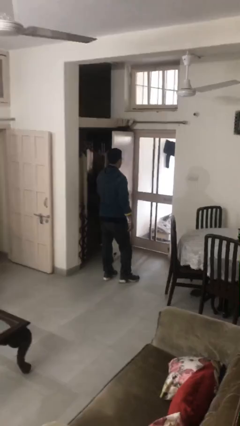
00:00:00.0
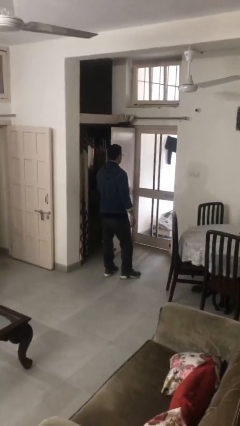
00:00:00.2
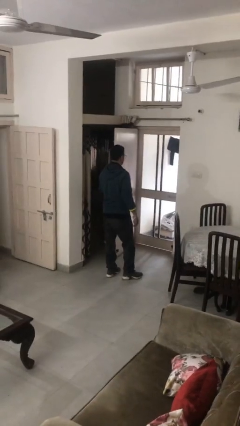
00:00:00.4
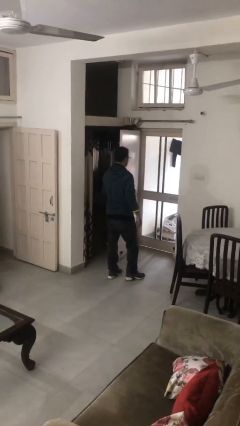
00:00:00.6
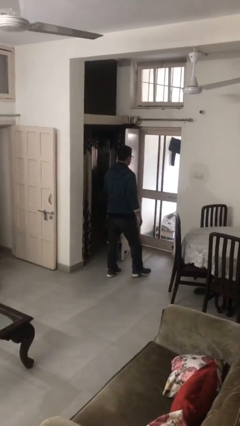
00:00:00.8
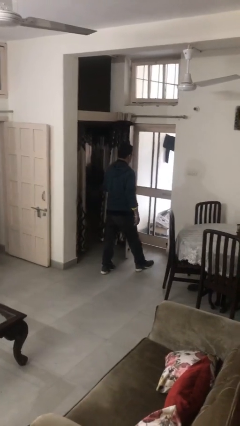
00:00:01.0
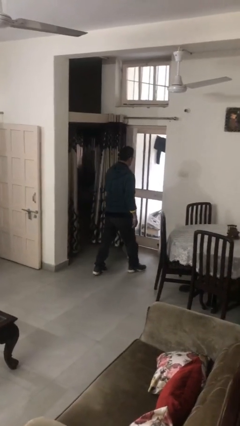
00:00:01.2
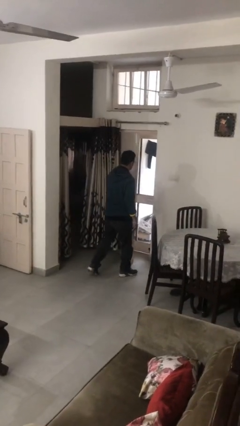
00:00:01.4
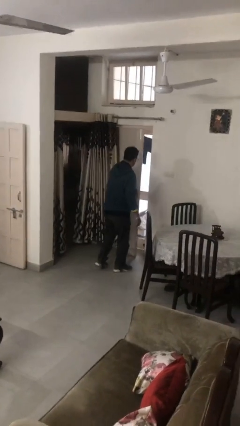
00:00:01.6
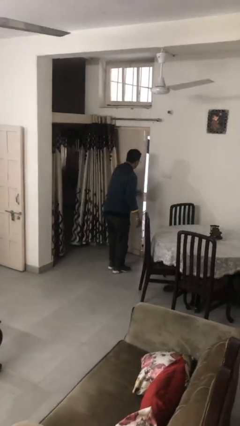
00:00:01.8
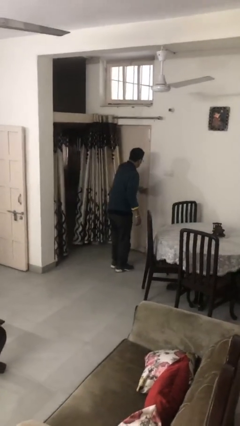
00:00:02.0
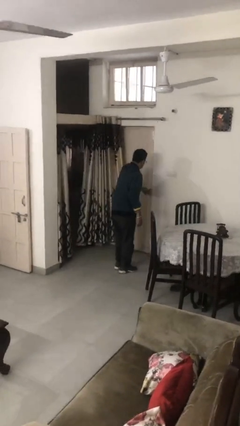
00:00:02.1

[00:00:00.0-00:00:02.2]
person closes facility door

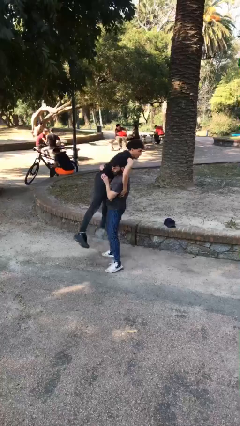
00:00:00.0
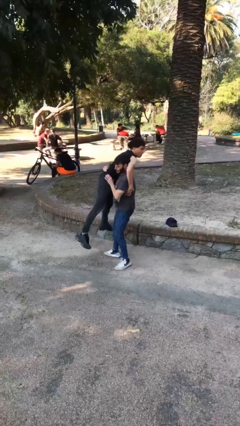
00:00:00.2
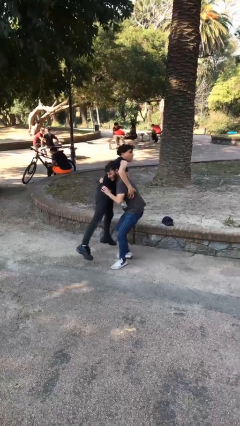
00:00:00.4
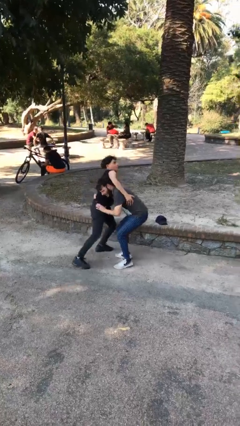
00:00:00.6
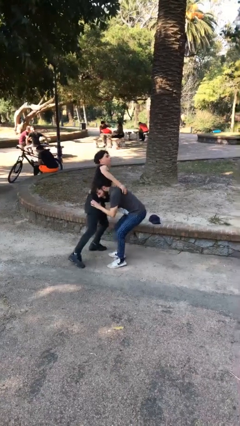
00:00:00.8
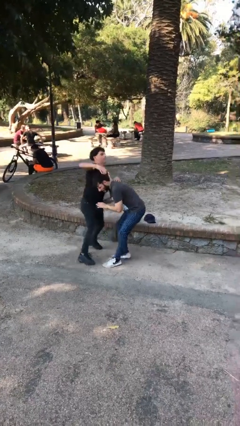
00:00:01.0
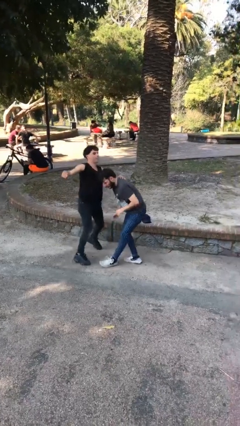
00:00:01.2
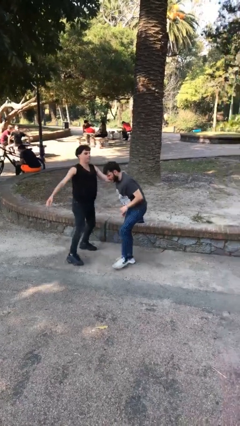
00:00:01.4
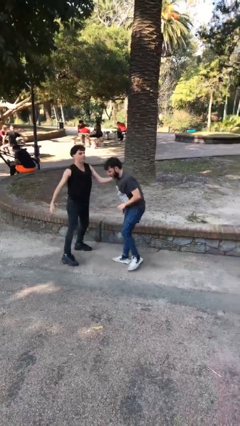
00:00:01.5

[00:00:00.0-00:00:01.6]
person puts down person

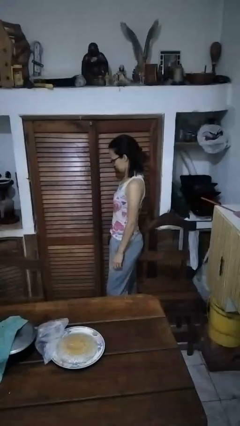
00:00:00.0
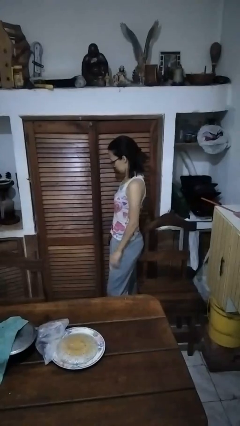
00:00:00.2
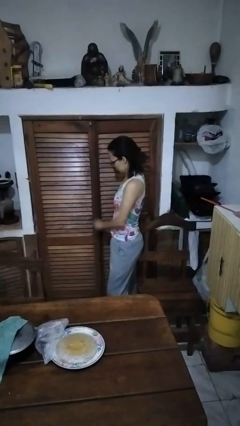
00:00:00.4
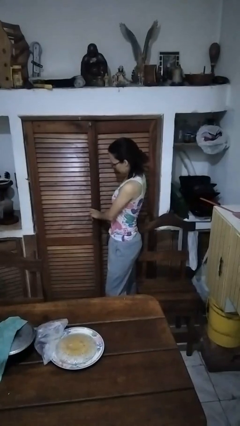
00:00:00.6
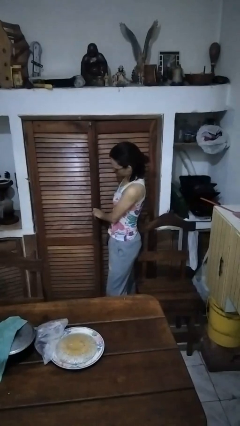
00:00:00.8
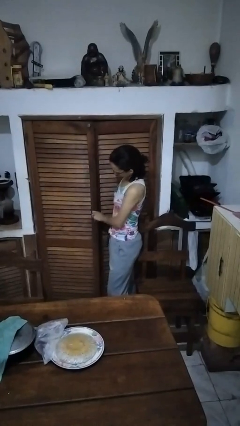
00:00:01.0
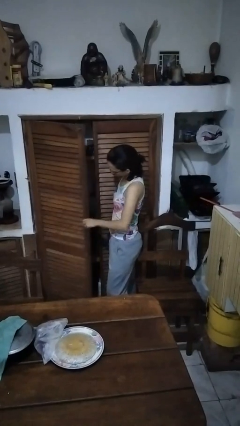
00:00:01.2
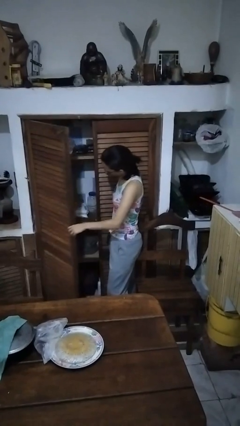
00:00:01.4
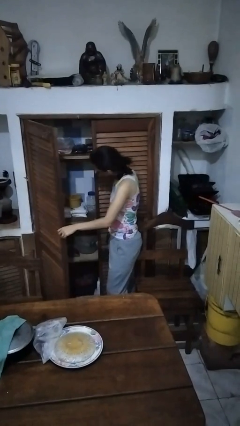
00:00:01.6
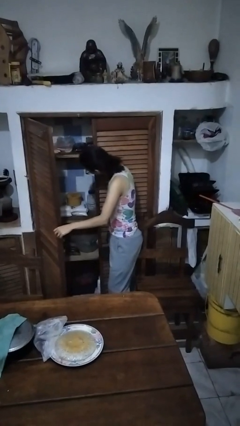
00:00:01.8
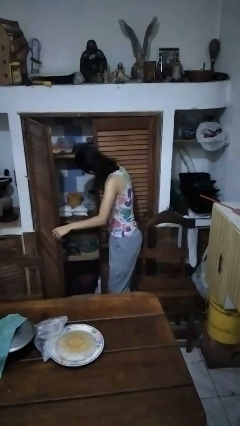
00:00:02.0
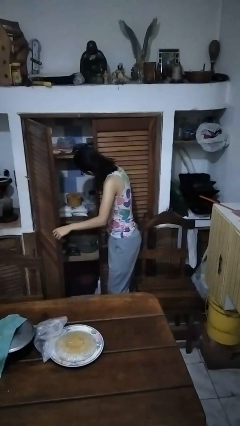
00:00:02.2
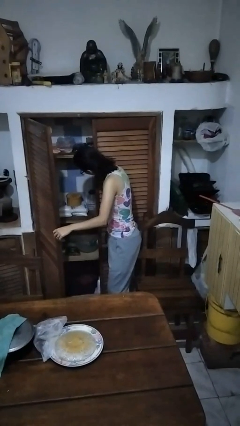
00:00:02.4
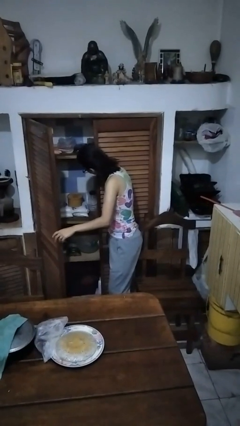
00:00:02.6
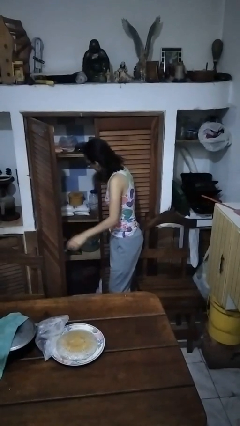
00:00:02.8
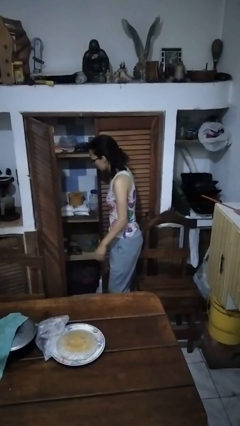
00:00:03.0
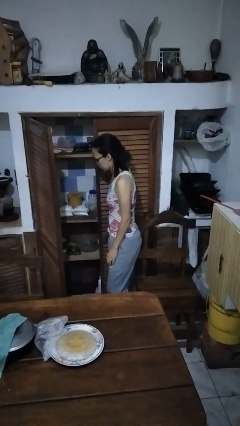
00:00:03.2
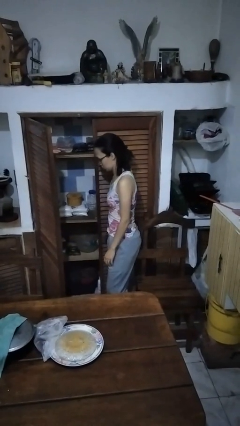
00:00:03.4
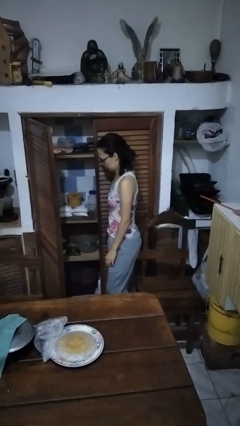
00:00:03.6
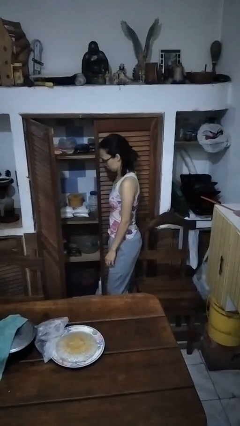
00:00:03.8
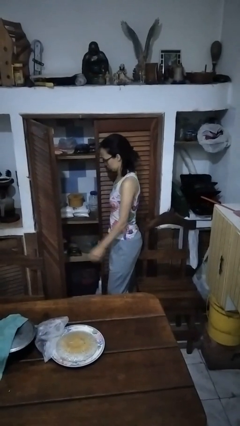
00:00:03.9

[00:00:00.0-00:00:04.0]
person opens cabinet

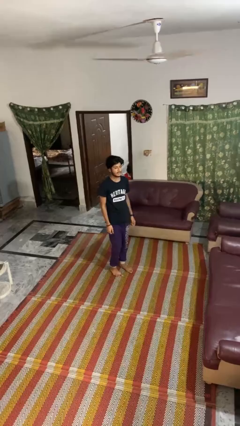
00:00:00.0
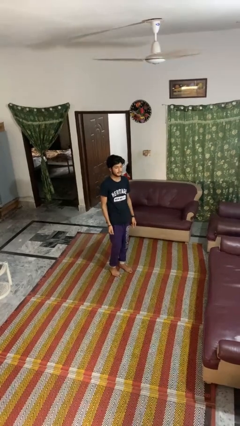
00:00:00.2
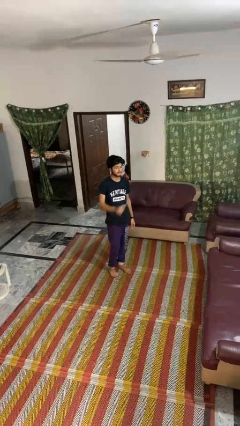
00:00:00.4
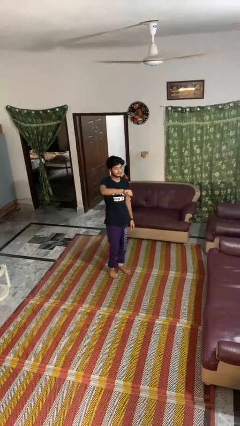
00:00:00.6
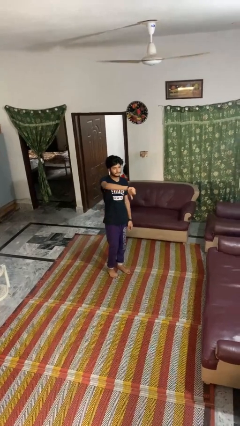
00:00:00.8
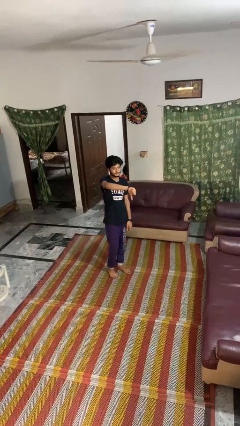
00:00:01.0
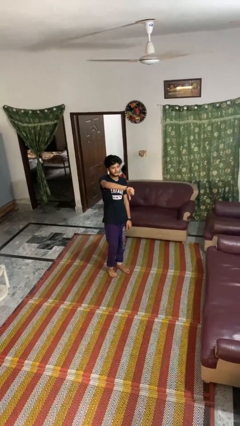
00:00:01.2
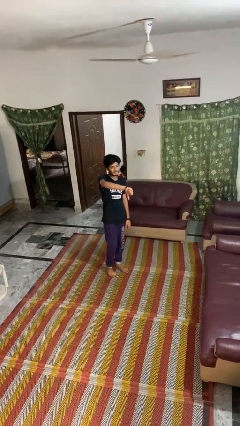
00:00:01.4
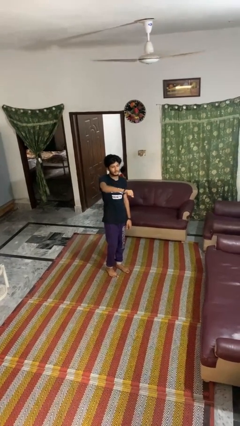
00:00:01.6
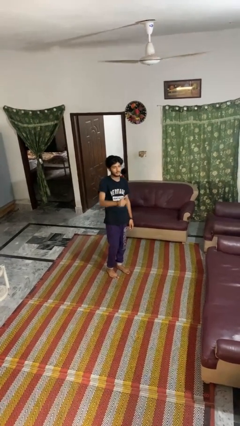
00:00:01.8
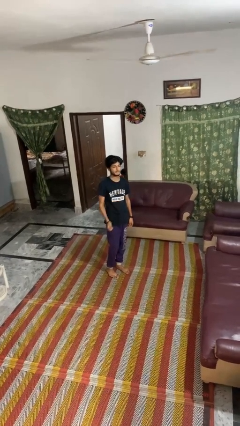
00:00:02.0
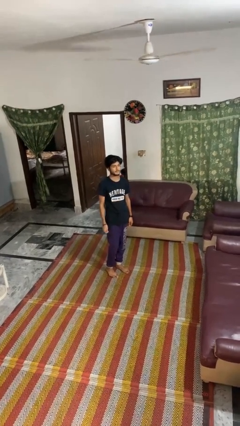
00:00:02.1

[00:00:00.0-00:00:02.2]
person gestures thumbs down

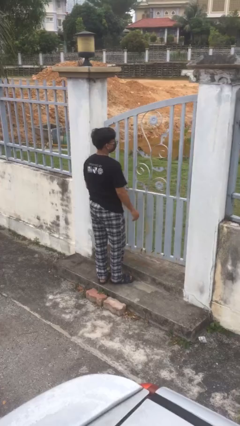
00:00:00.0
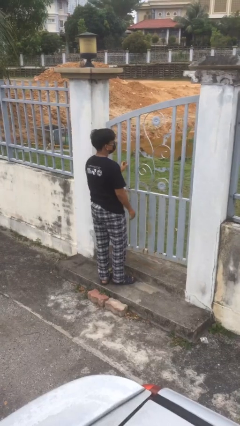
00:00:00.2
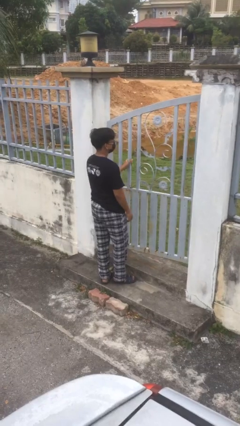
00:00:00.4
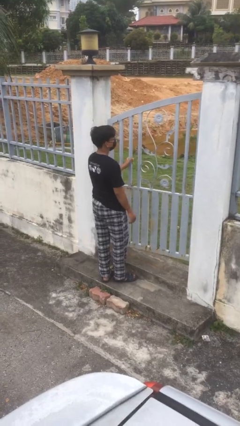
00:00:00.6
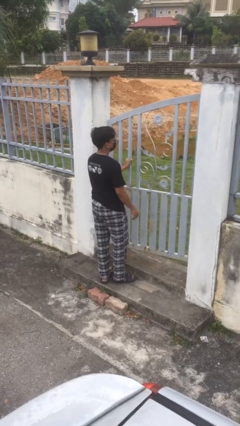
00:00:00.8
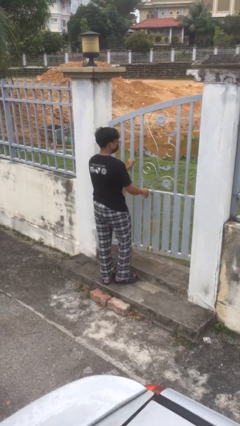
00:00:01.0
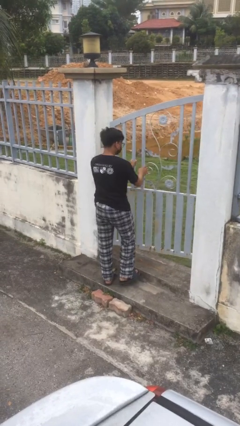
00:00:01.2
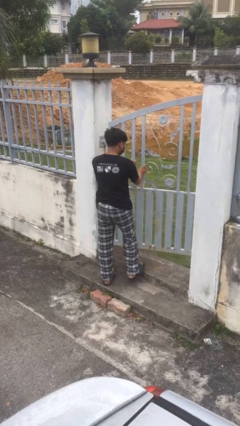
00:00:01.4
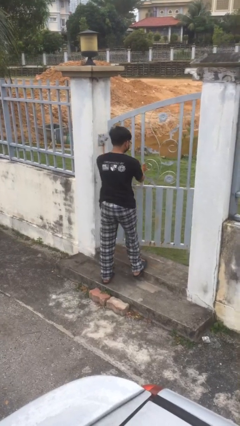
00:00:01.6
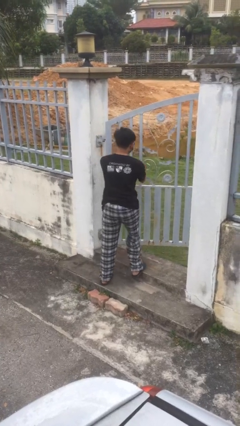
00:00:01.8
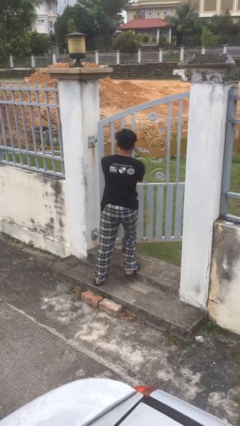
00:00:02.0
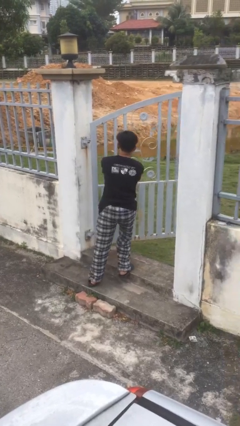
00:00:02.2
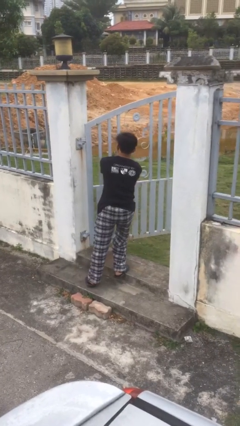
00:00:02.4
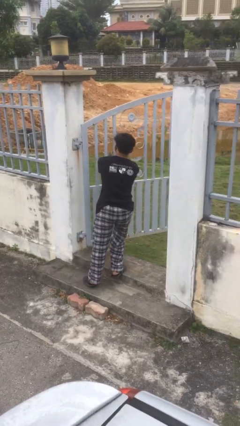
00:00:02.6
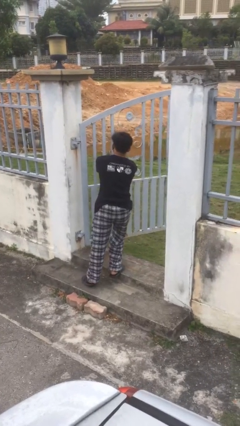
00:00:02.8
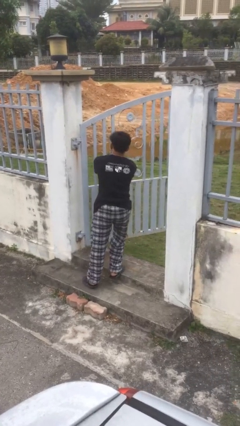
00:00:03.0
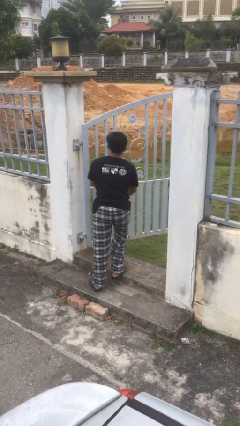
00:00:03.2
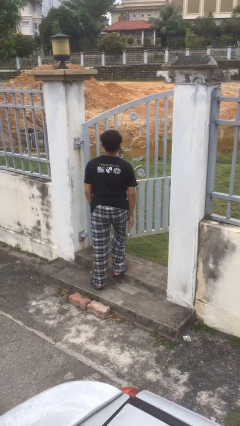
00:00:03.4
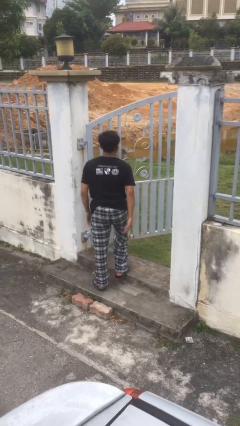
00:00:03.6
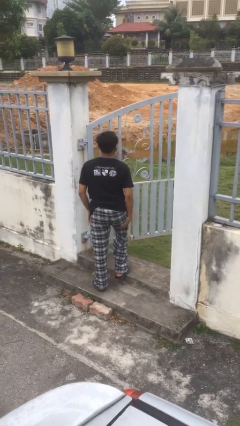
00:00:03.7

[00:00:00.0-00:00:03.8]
person opens facility door

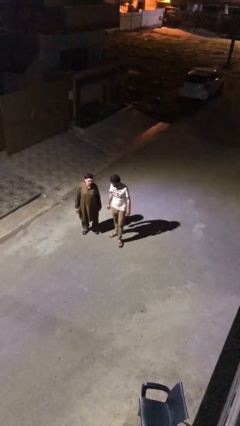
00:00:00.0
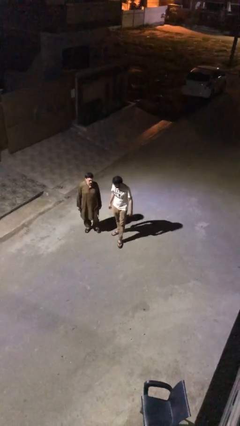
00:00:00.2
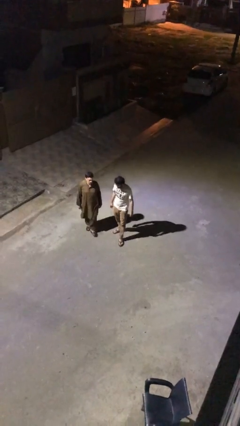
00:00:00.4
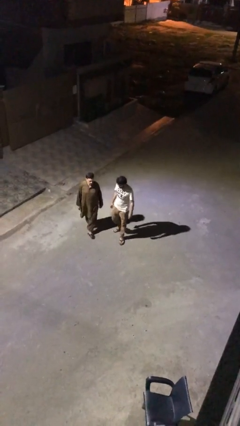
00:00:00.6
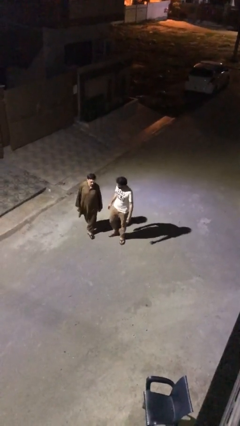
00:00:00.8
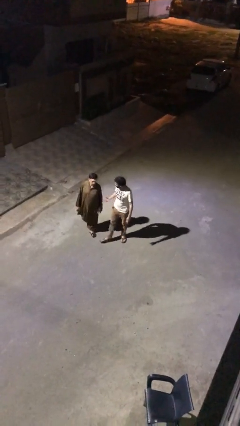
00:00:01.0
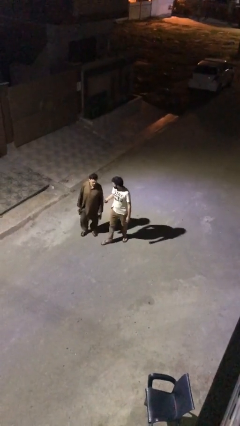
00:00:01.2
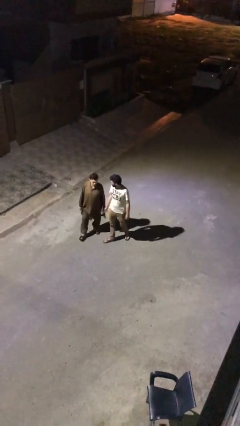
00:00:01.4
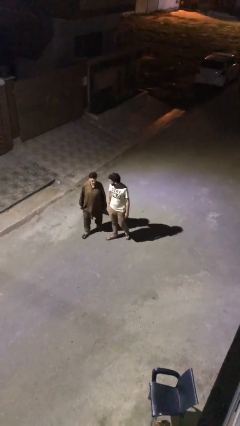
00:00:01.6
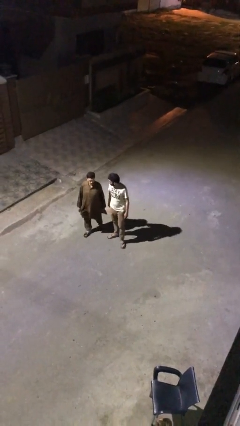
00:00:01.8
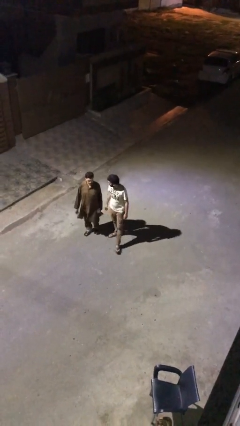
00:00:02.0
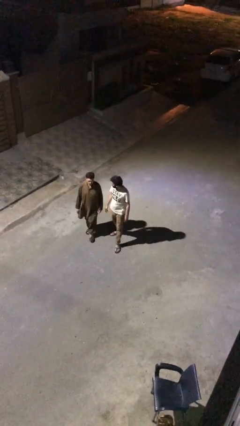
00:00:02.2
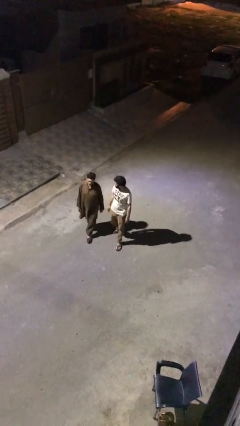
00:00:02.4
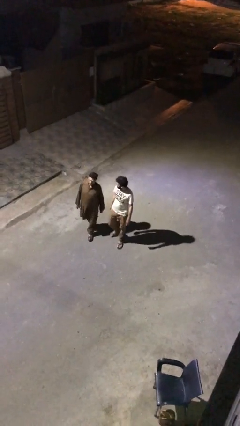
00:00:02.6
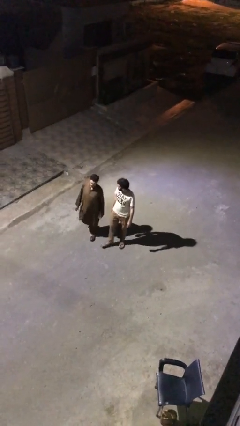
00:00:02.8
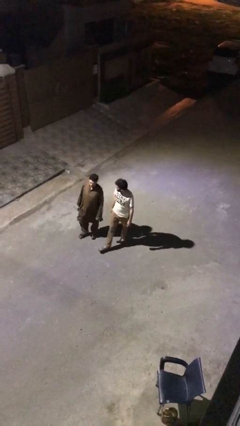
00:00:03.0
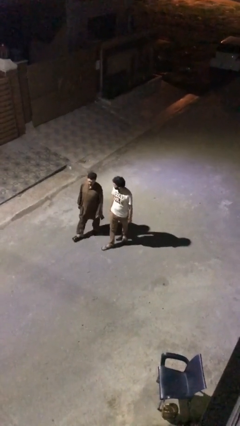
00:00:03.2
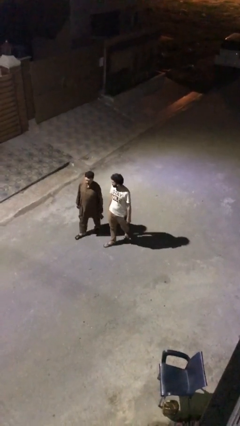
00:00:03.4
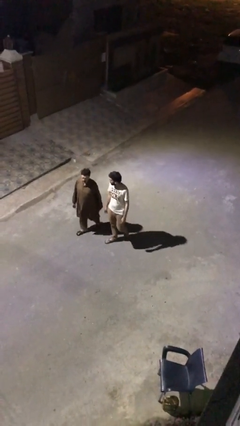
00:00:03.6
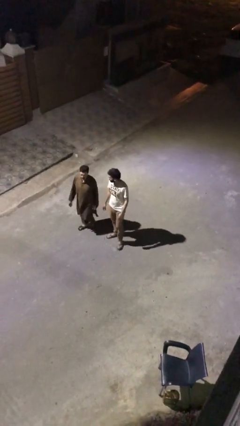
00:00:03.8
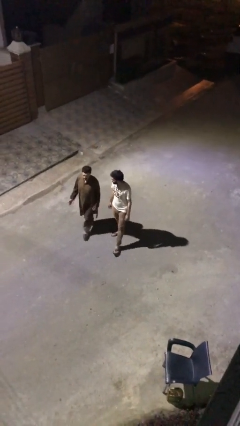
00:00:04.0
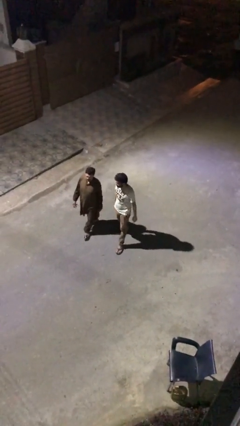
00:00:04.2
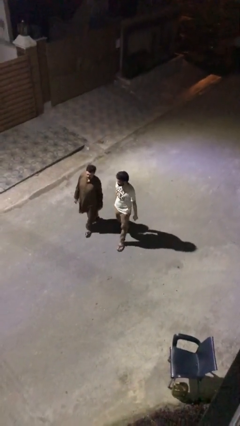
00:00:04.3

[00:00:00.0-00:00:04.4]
person talks to person
